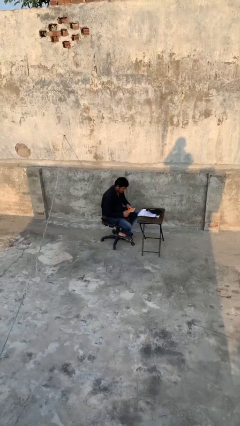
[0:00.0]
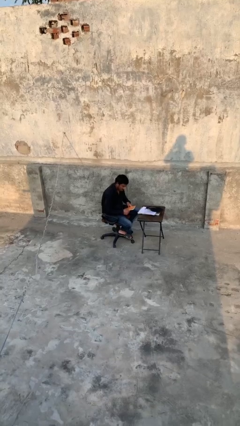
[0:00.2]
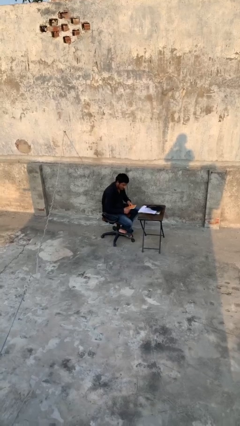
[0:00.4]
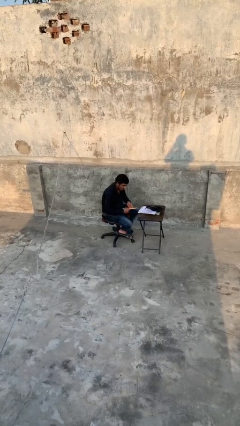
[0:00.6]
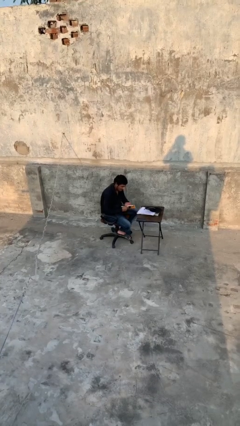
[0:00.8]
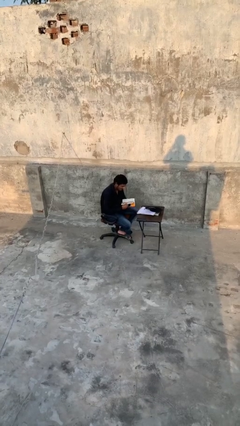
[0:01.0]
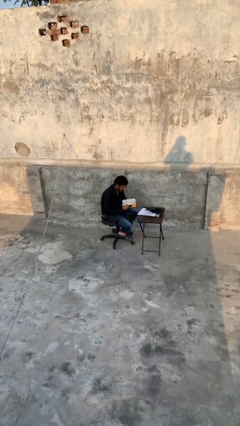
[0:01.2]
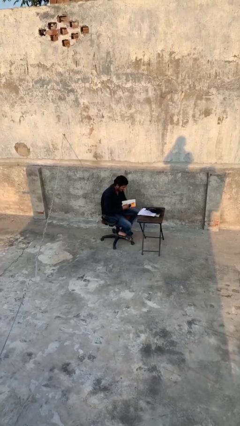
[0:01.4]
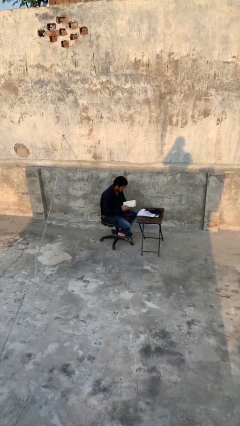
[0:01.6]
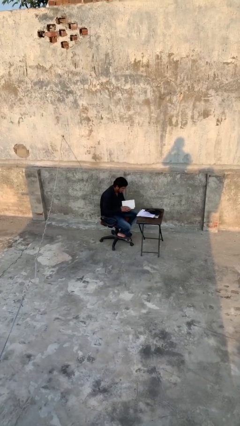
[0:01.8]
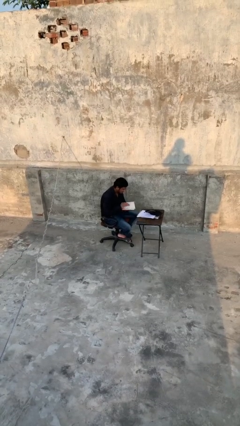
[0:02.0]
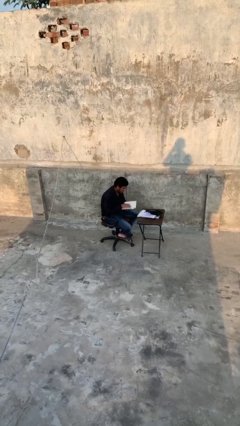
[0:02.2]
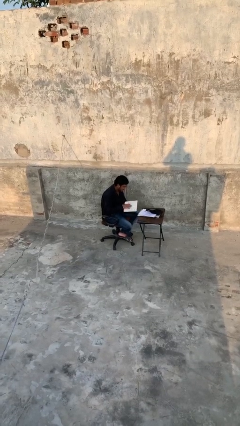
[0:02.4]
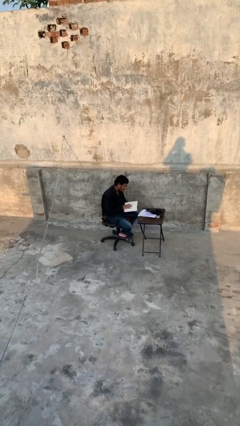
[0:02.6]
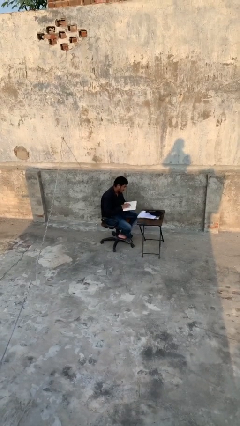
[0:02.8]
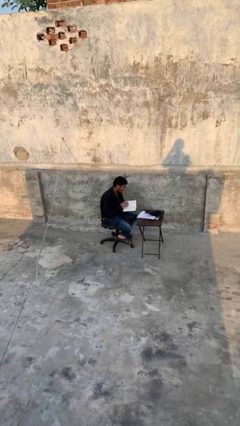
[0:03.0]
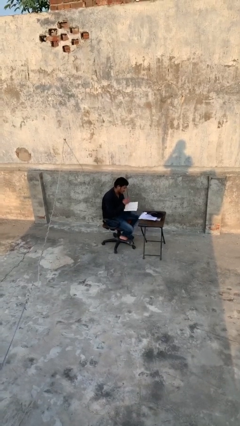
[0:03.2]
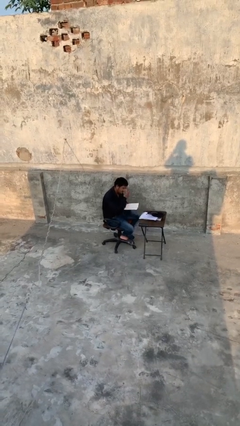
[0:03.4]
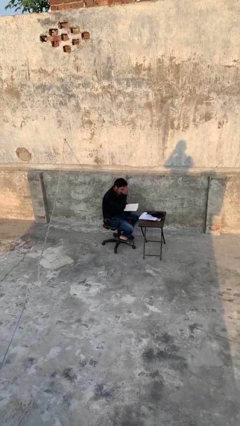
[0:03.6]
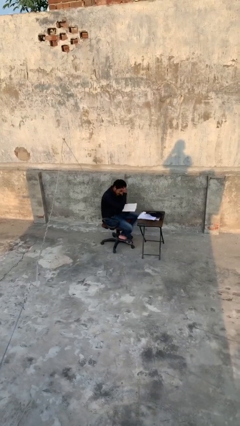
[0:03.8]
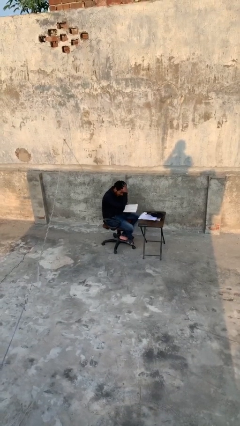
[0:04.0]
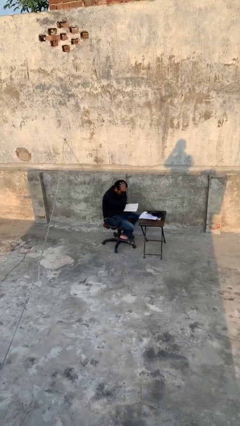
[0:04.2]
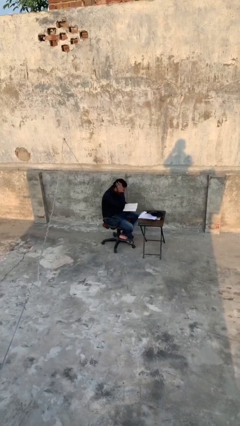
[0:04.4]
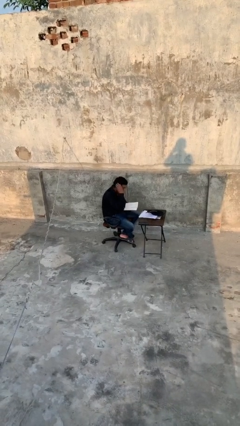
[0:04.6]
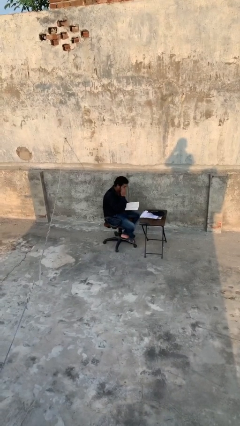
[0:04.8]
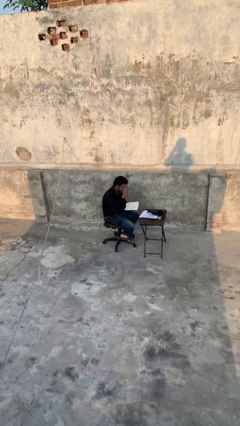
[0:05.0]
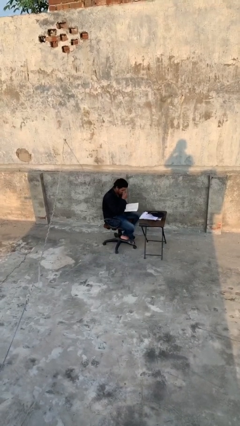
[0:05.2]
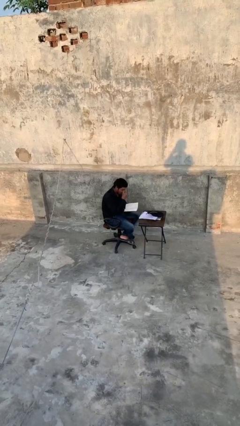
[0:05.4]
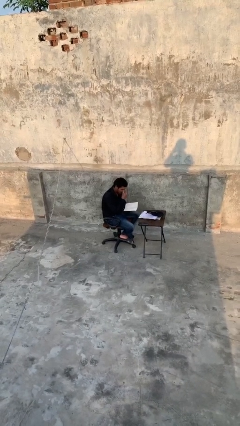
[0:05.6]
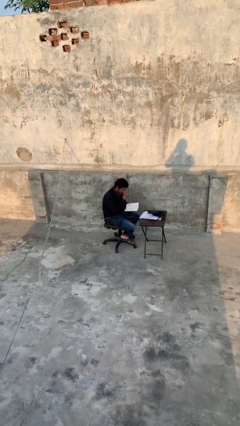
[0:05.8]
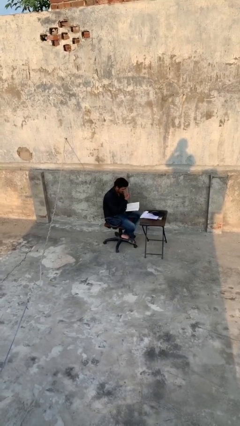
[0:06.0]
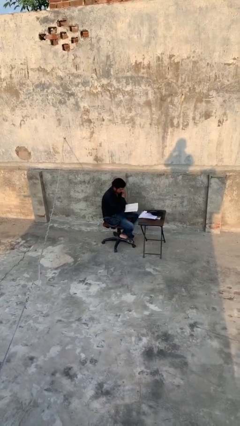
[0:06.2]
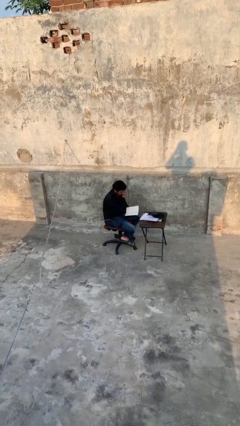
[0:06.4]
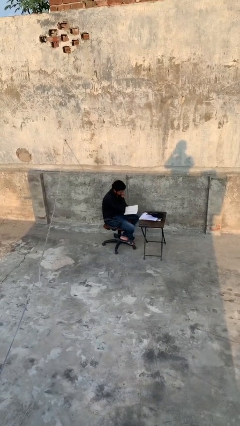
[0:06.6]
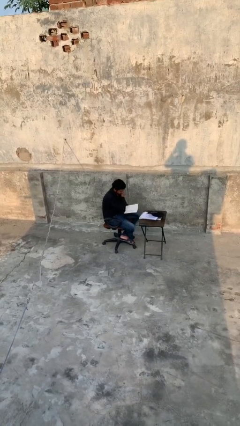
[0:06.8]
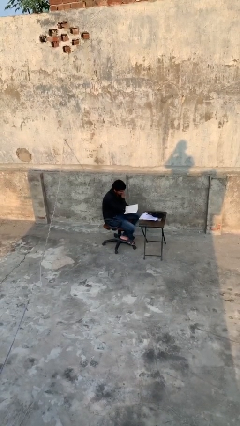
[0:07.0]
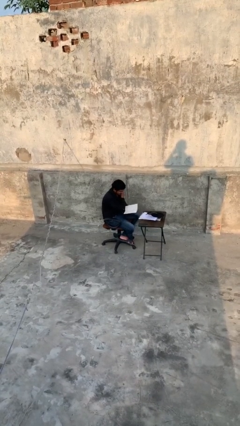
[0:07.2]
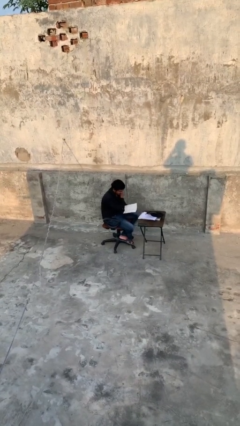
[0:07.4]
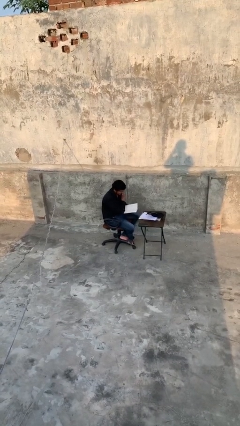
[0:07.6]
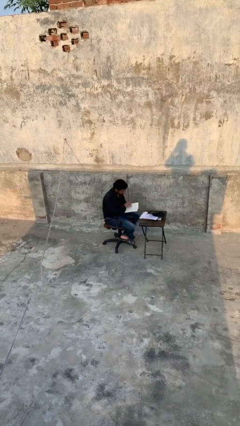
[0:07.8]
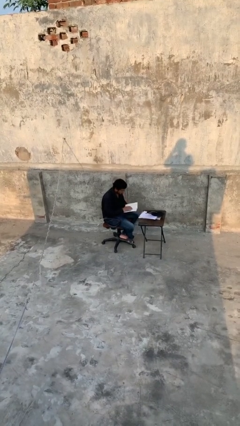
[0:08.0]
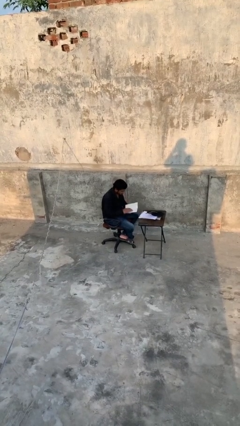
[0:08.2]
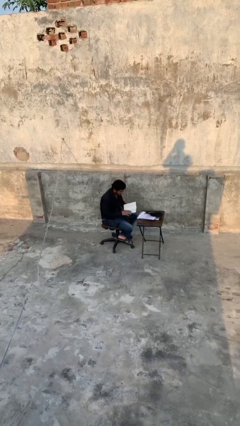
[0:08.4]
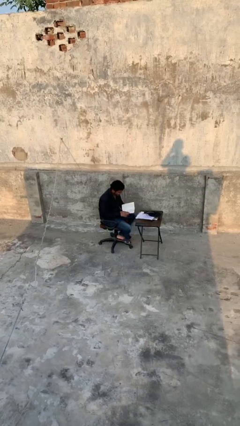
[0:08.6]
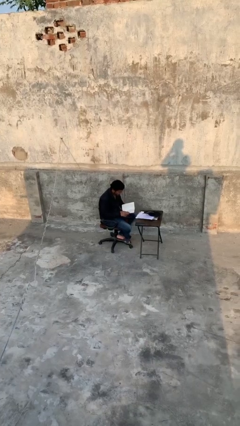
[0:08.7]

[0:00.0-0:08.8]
person reads document

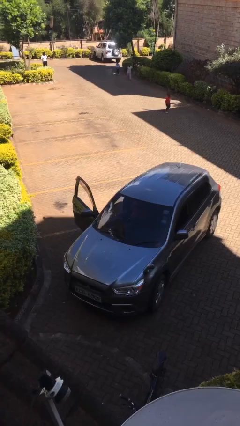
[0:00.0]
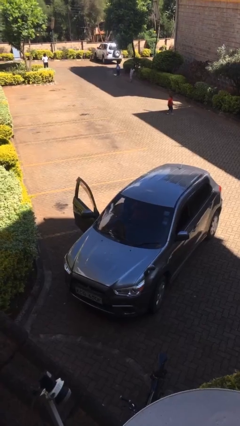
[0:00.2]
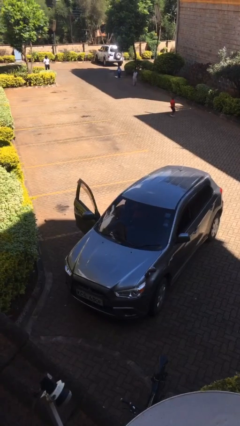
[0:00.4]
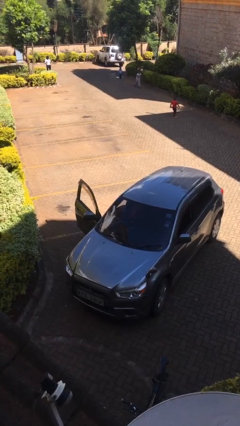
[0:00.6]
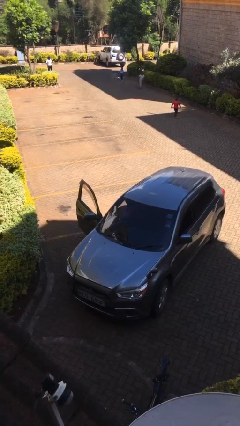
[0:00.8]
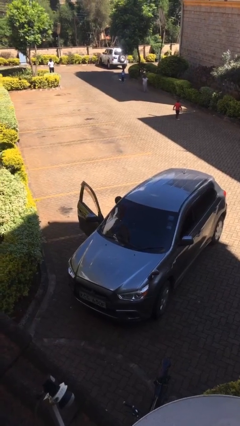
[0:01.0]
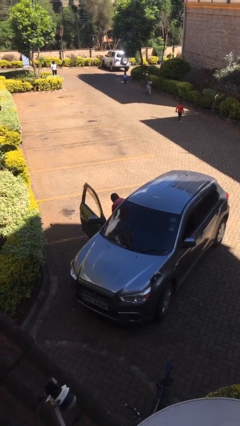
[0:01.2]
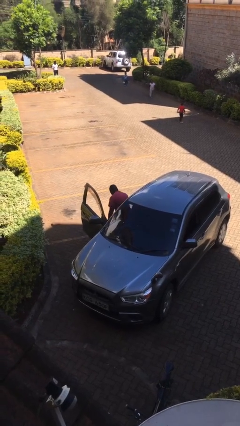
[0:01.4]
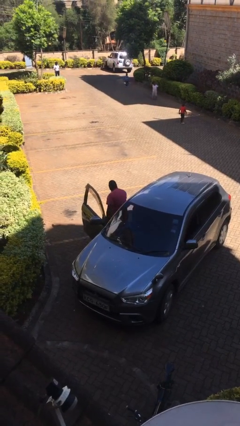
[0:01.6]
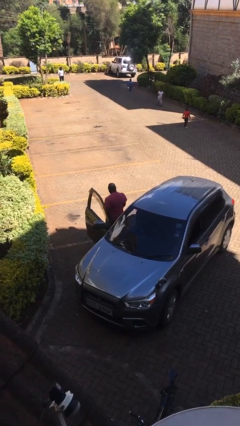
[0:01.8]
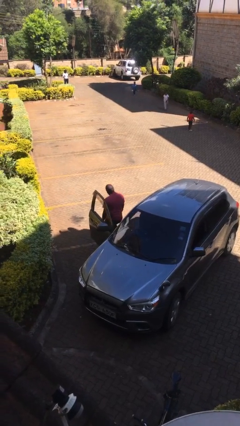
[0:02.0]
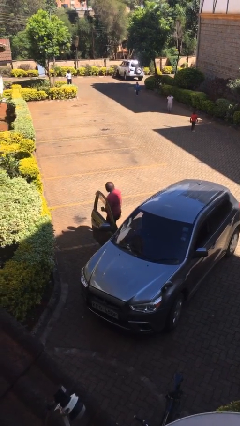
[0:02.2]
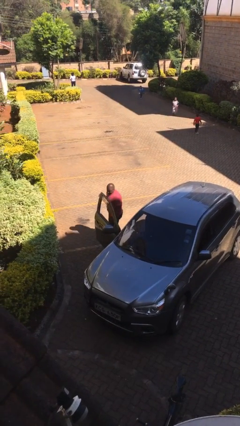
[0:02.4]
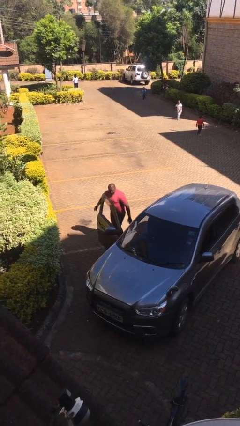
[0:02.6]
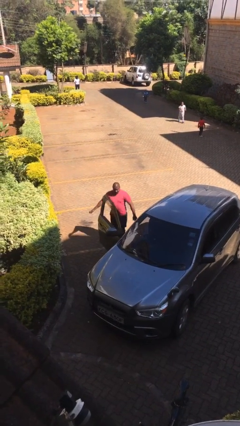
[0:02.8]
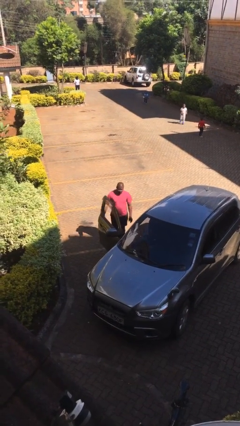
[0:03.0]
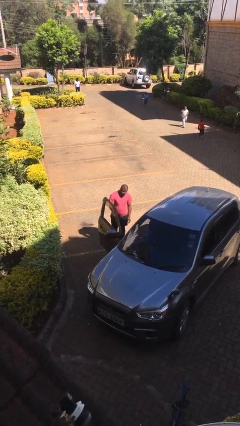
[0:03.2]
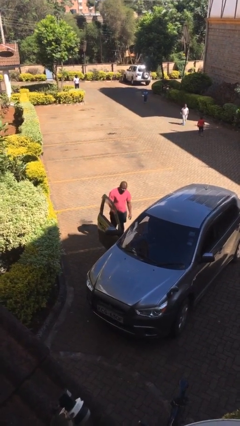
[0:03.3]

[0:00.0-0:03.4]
person exits car

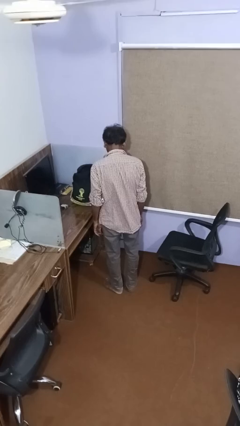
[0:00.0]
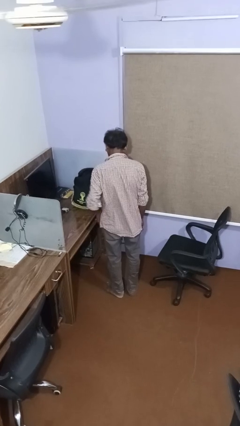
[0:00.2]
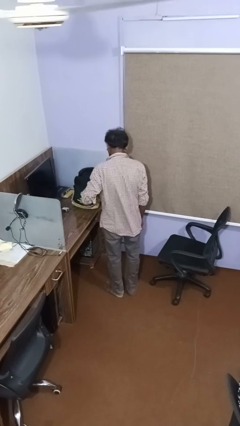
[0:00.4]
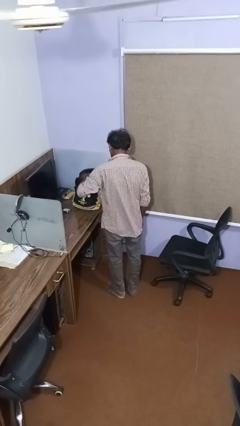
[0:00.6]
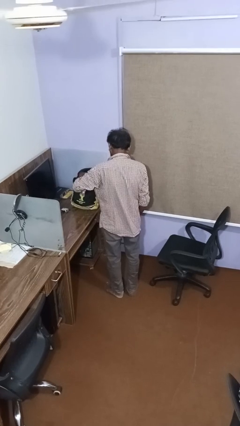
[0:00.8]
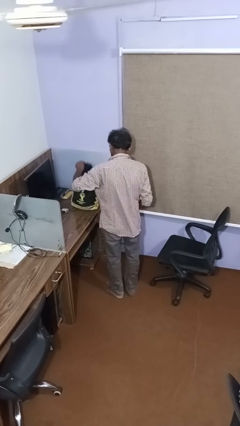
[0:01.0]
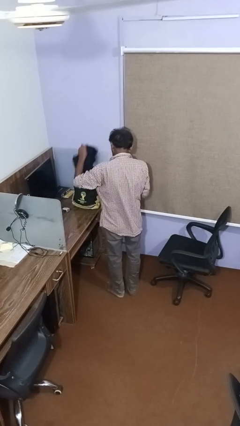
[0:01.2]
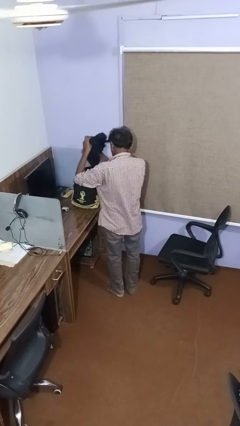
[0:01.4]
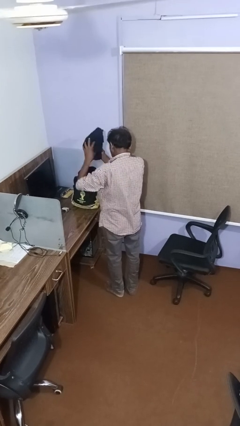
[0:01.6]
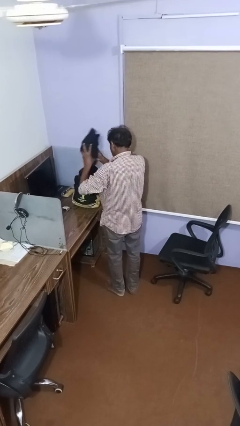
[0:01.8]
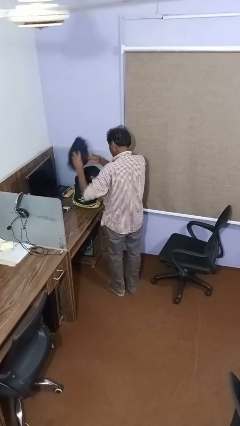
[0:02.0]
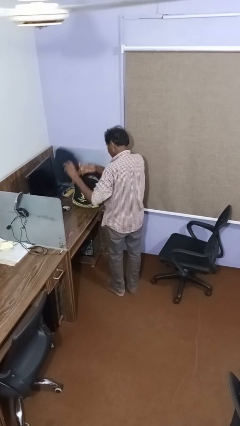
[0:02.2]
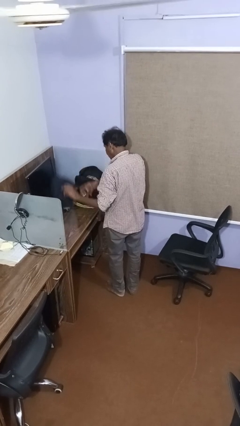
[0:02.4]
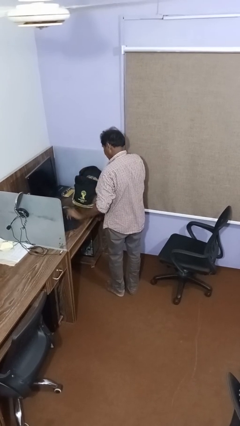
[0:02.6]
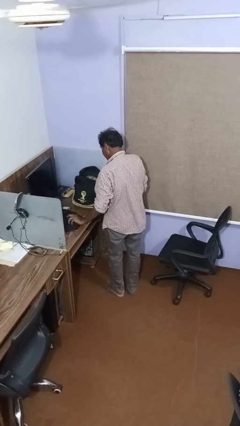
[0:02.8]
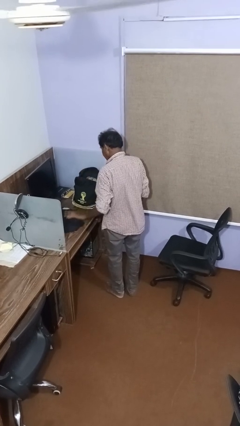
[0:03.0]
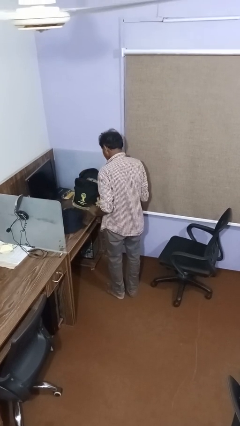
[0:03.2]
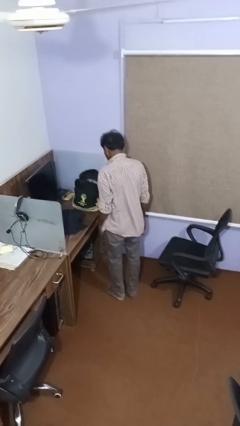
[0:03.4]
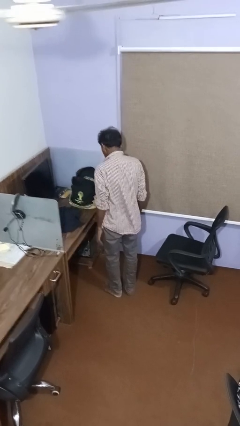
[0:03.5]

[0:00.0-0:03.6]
person unloads clothes from suitcase

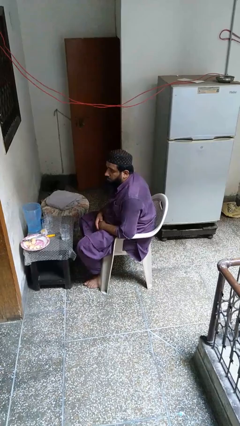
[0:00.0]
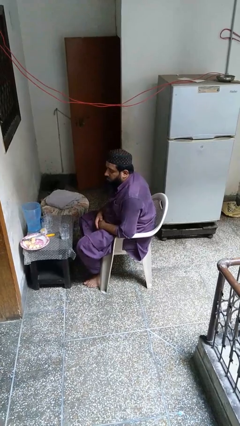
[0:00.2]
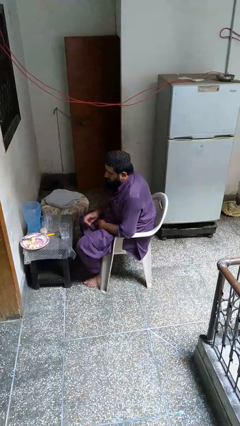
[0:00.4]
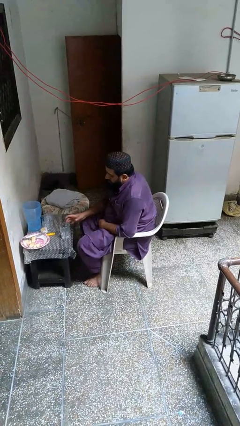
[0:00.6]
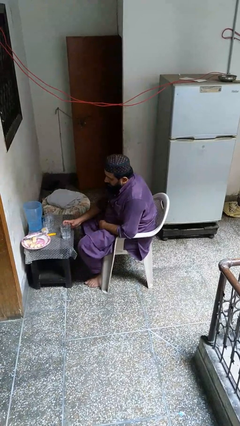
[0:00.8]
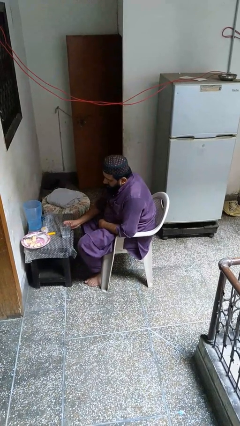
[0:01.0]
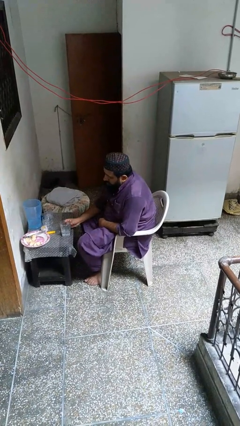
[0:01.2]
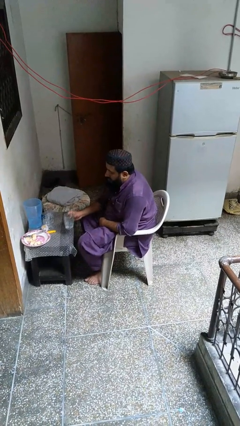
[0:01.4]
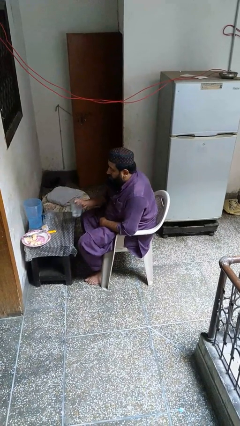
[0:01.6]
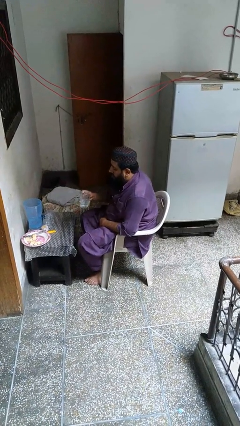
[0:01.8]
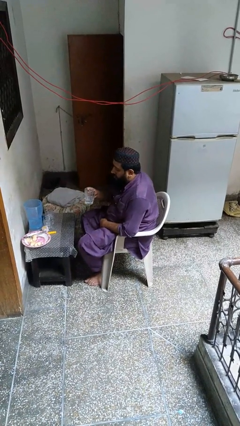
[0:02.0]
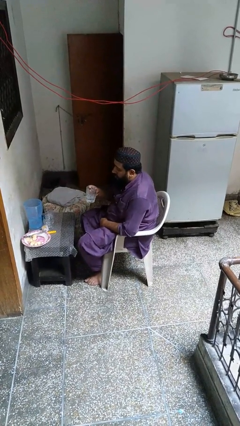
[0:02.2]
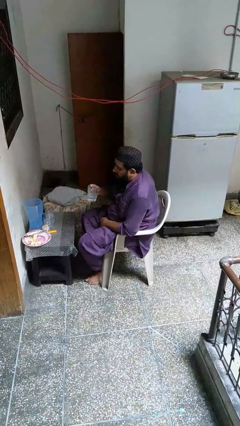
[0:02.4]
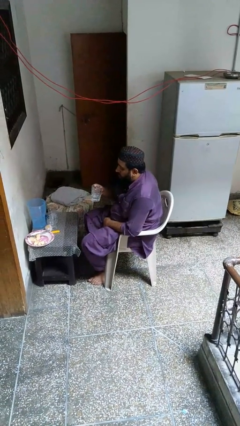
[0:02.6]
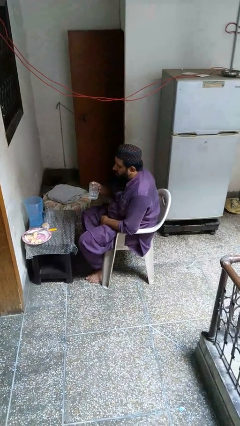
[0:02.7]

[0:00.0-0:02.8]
person picks up object from table
